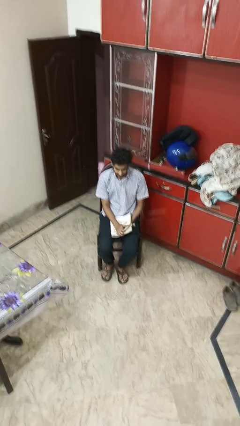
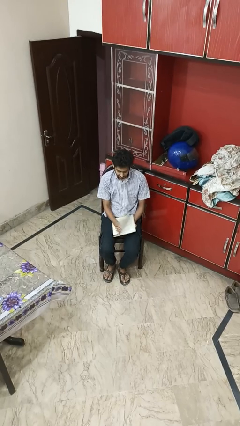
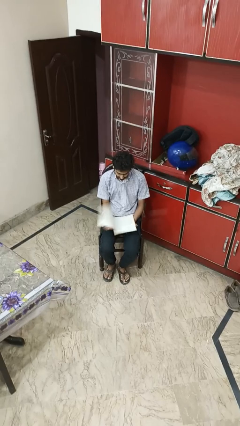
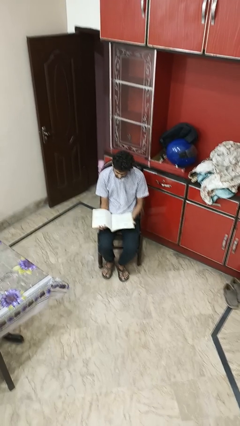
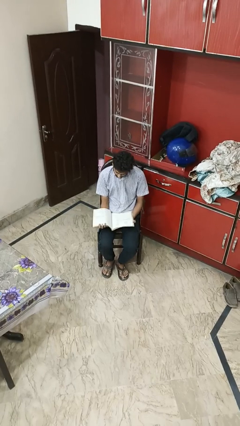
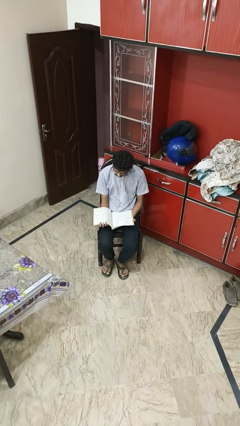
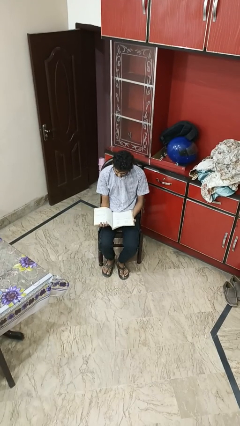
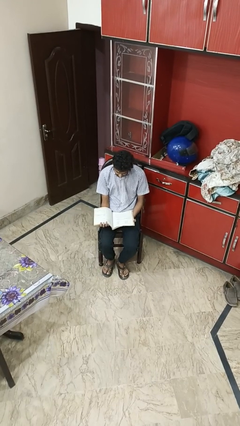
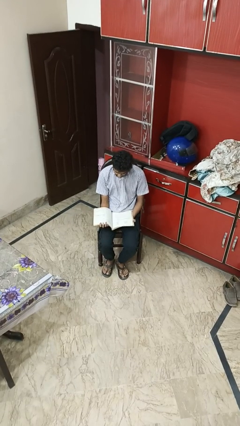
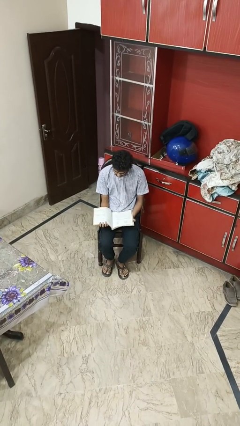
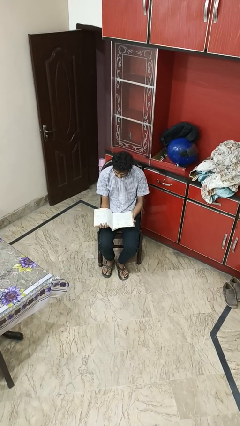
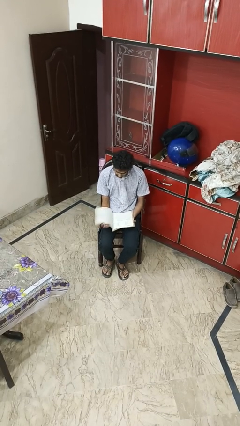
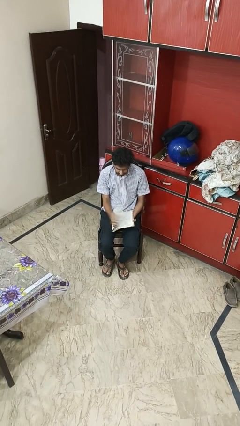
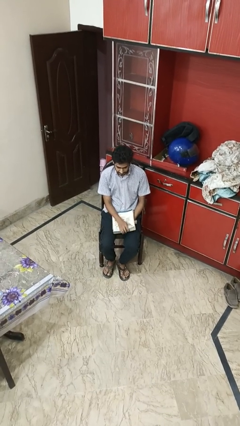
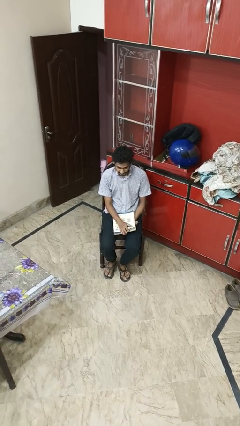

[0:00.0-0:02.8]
person reads magazine

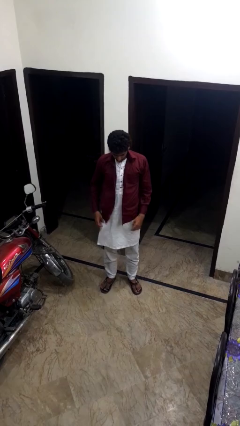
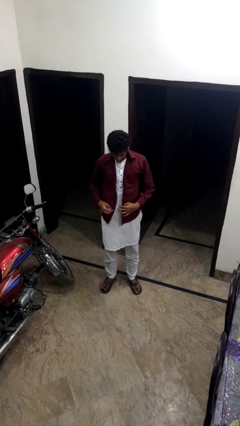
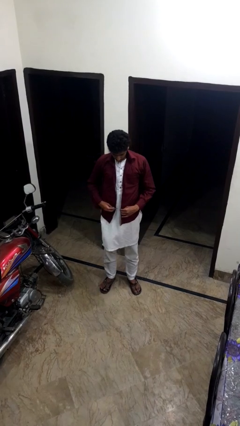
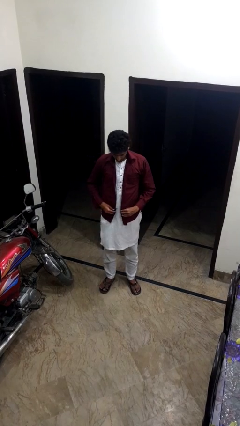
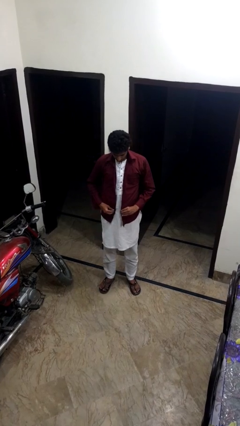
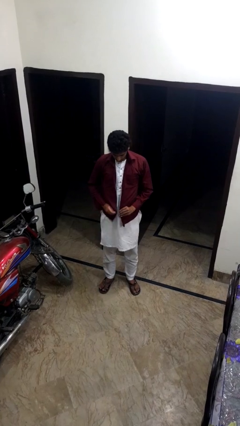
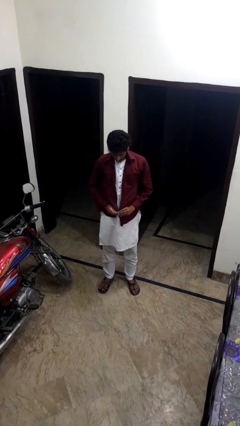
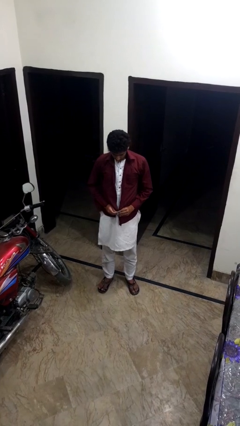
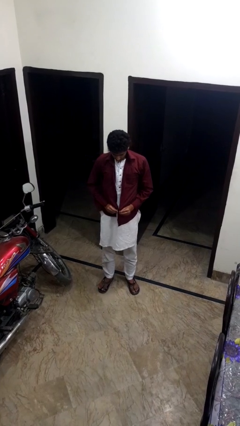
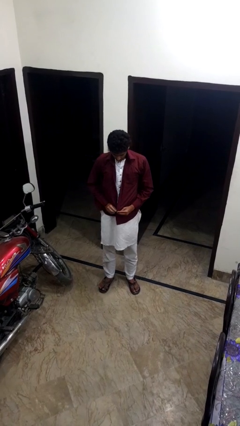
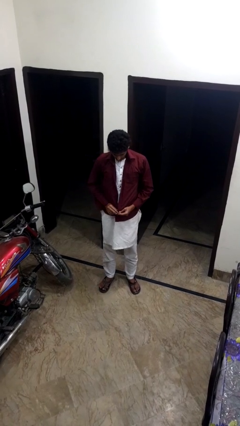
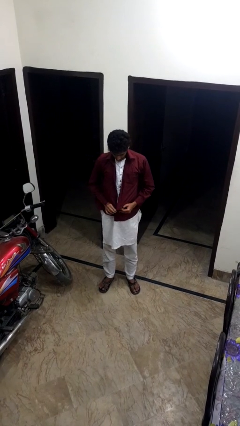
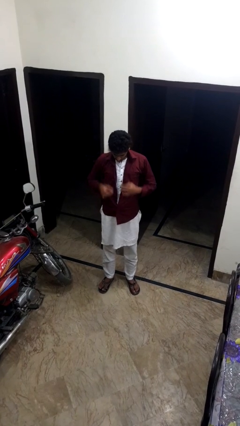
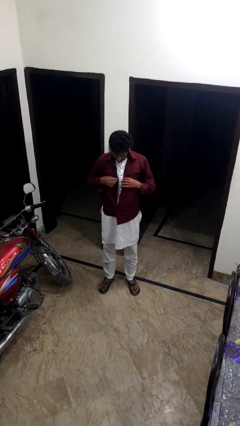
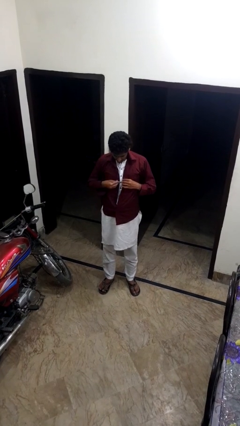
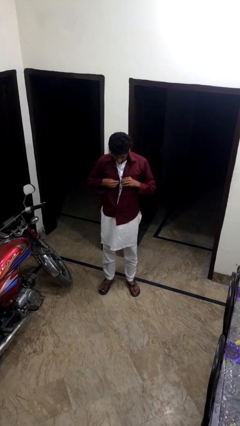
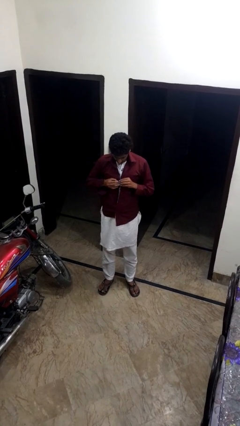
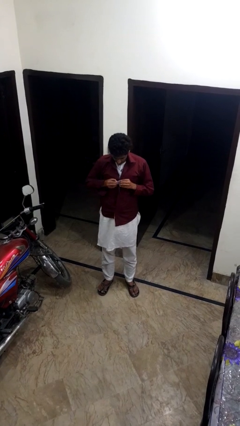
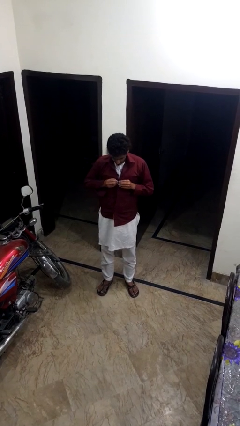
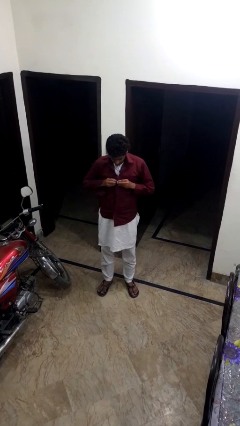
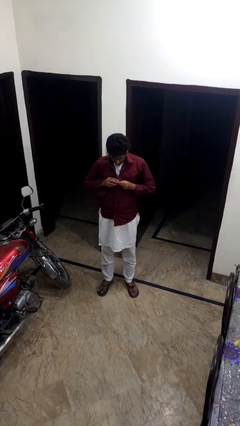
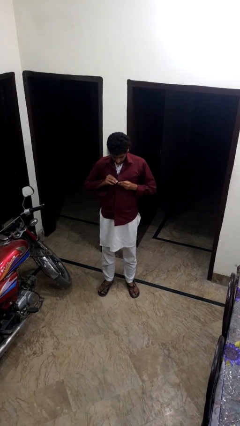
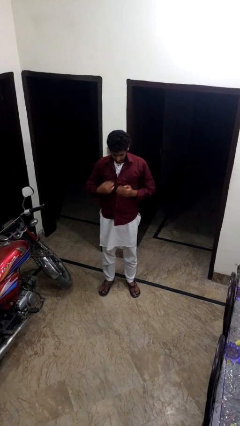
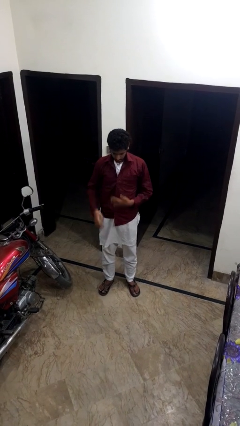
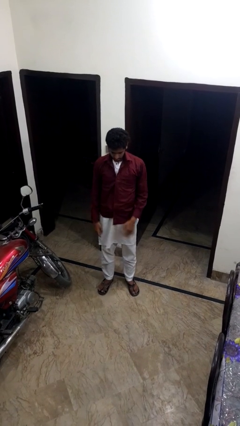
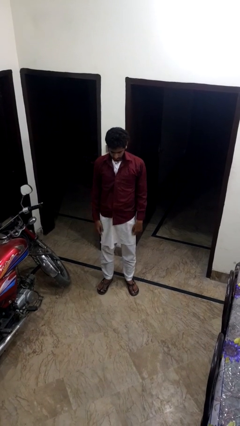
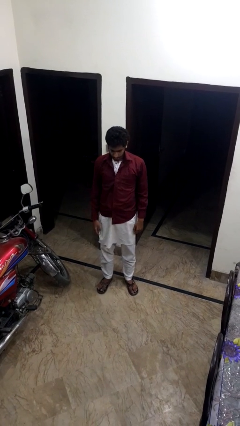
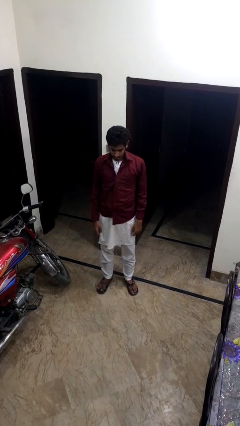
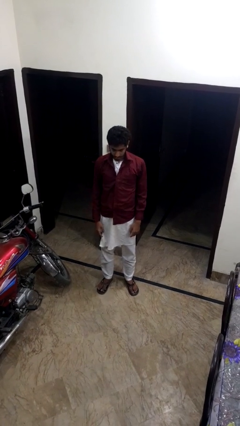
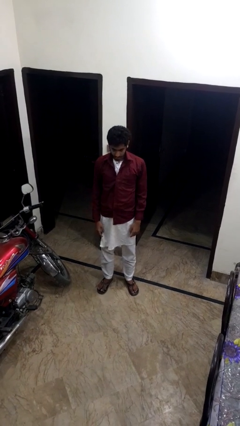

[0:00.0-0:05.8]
person buttons shirt

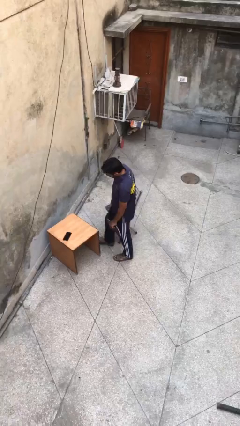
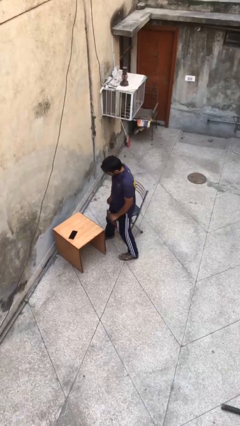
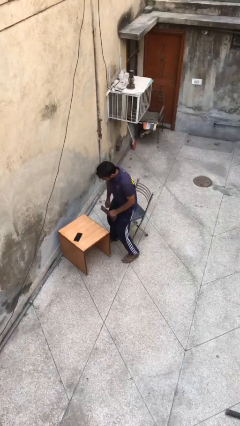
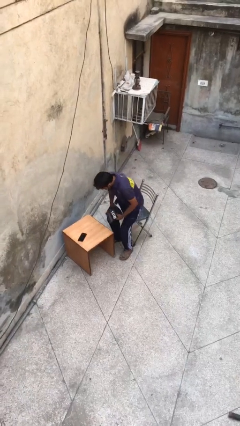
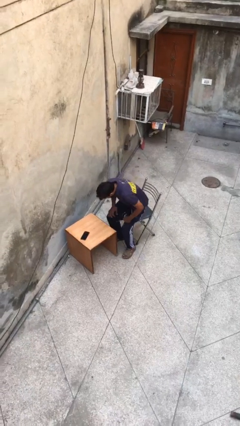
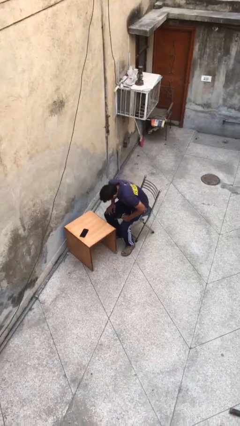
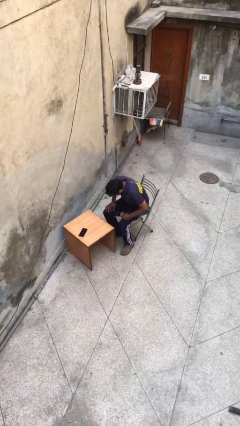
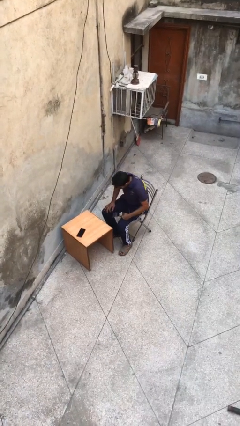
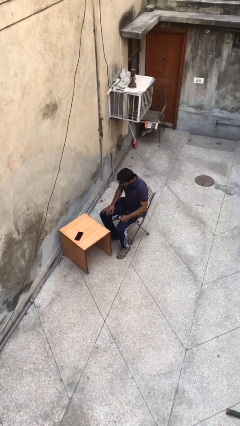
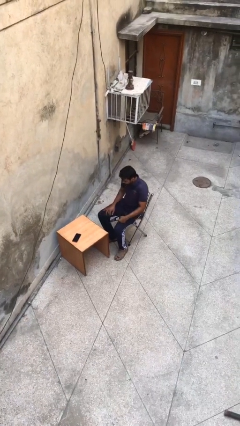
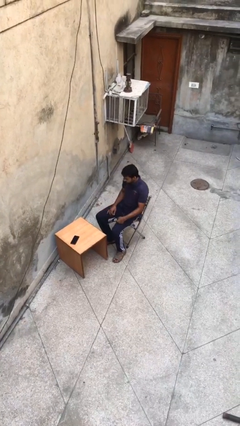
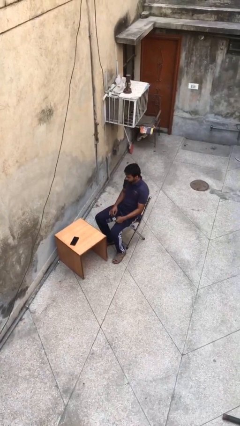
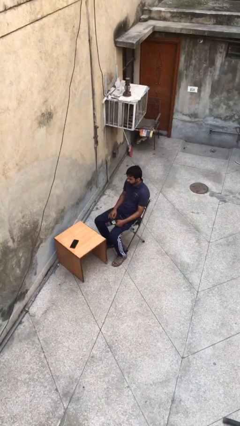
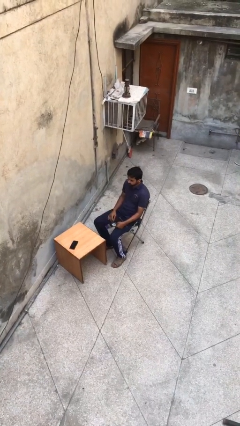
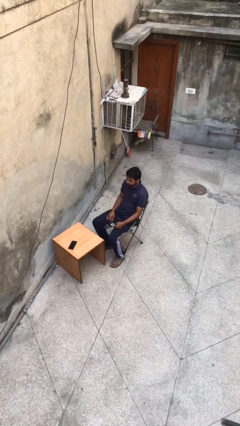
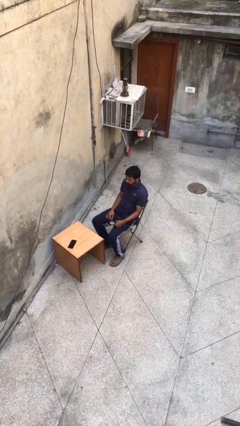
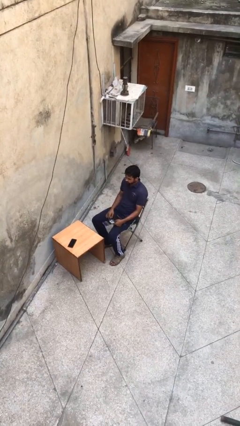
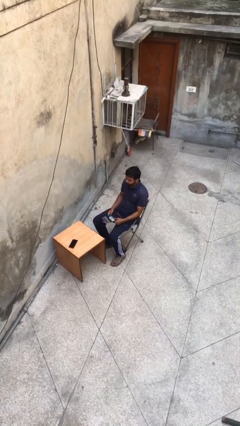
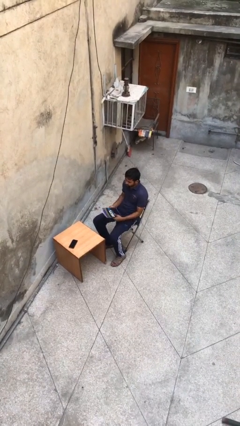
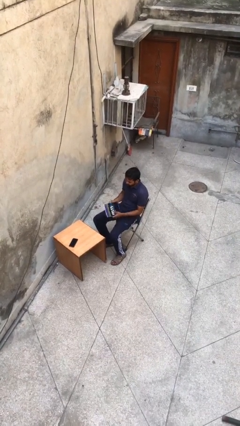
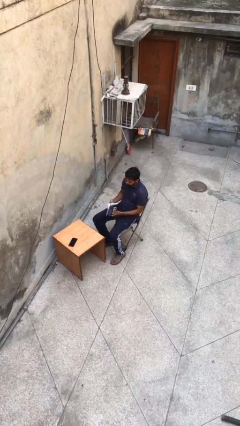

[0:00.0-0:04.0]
person sits down

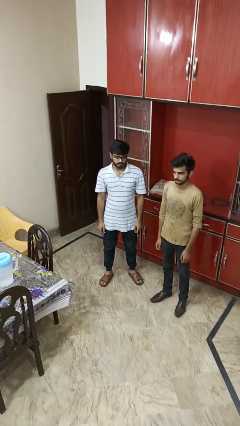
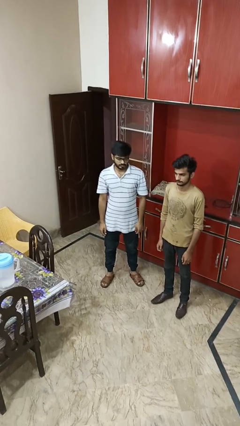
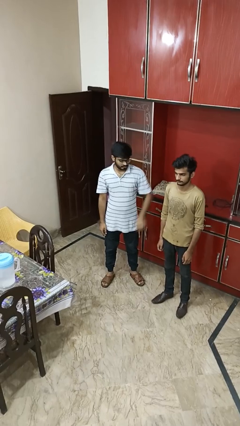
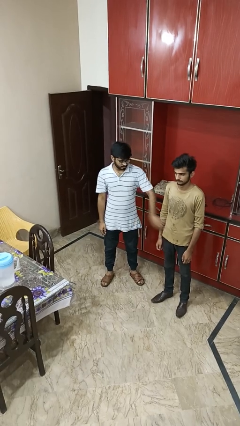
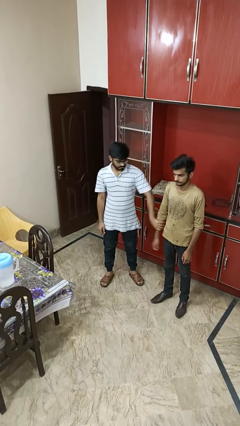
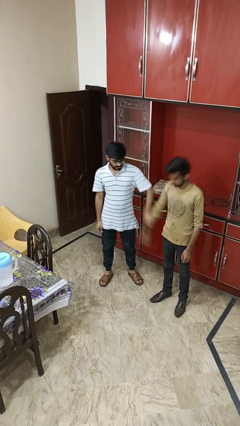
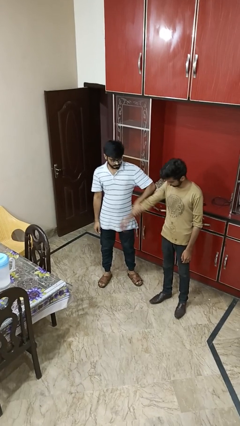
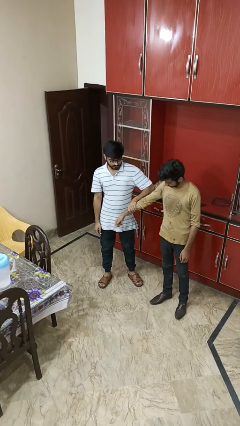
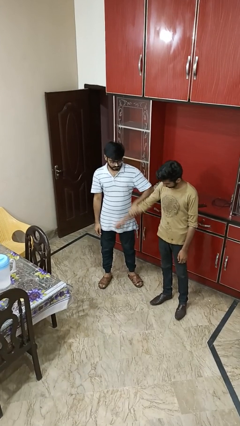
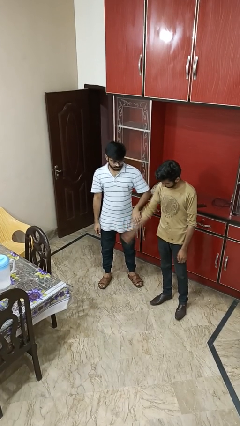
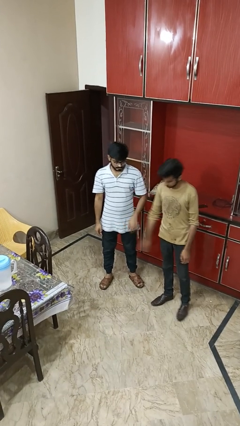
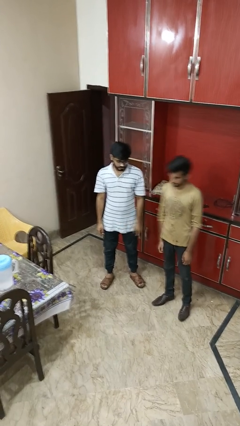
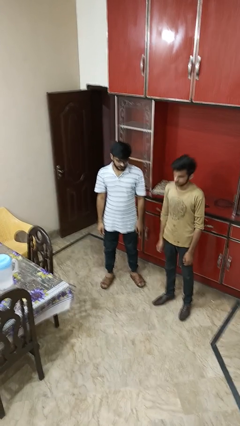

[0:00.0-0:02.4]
person grabs person by forearm

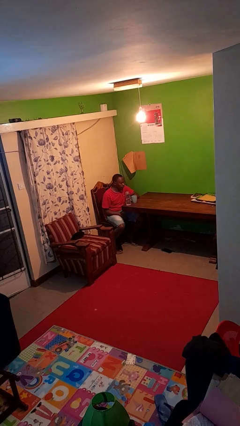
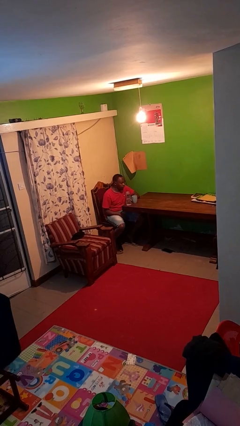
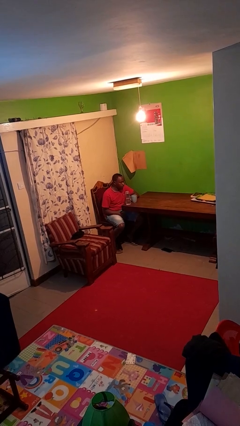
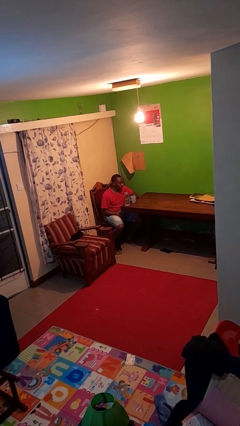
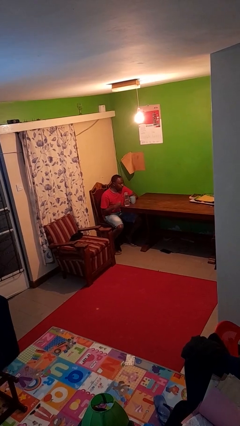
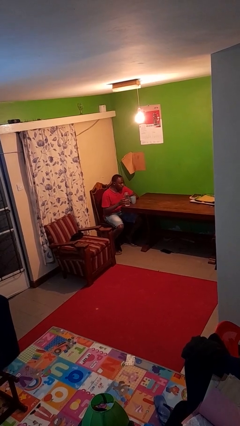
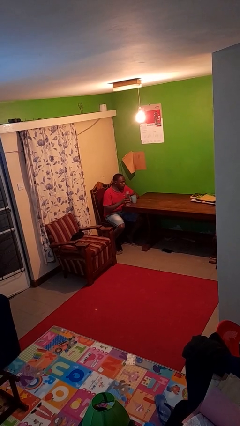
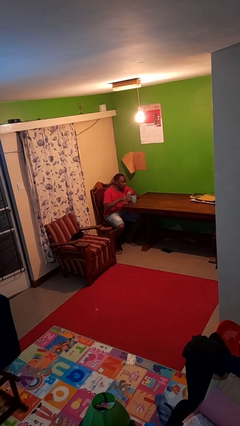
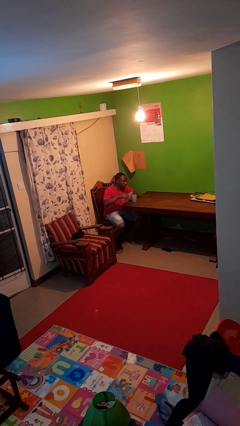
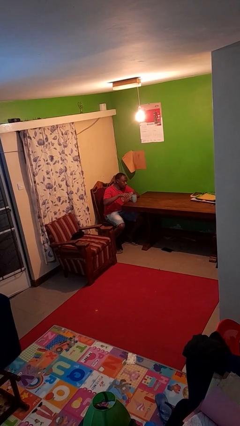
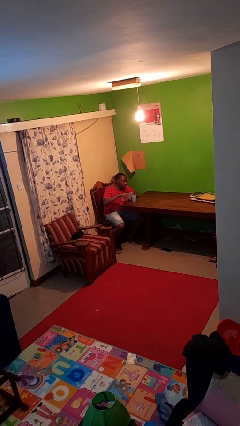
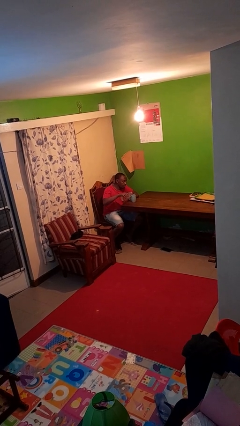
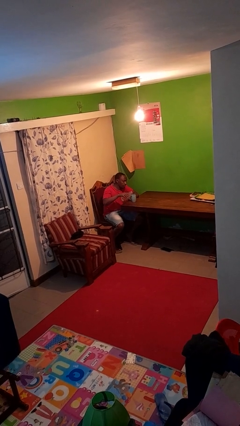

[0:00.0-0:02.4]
person pours liquid into cup
